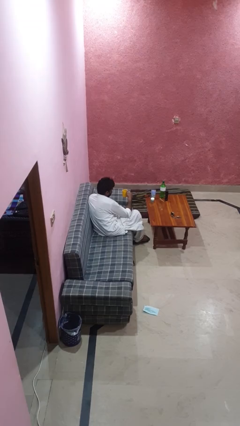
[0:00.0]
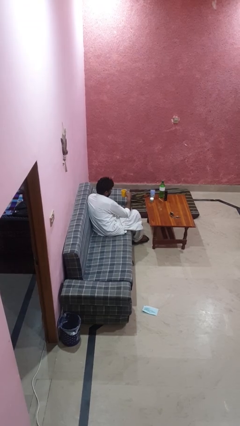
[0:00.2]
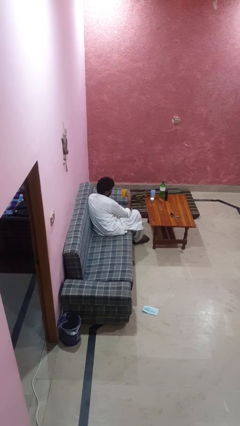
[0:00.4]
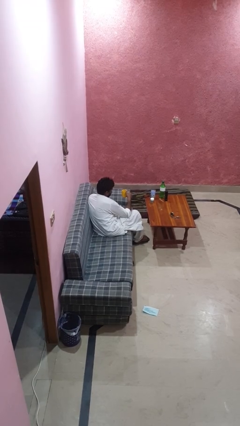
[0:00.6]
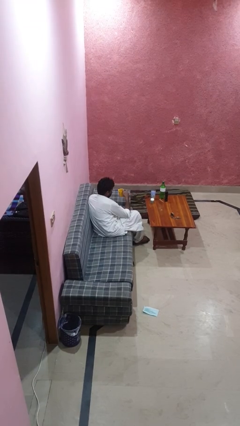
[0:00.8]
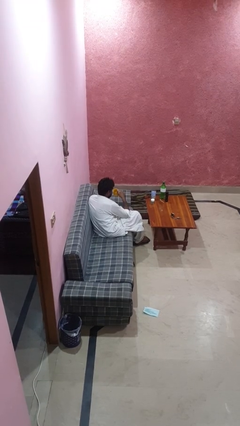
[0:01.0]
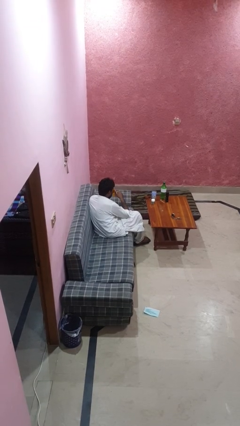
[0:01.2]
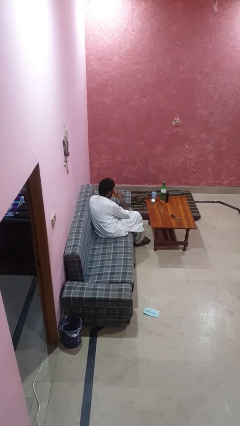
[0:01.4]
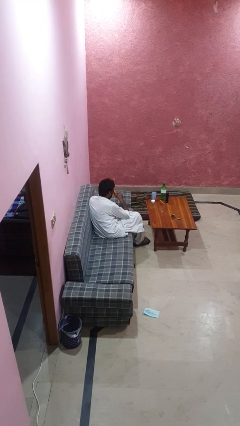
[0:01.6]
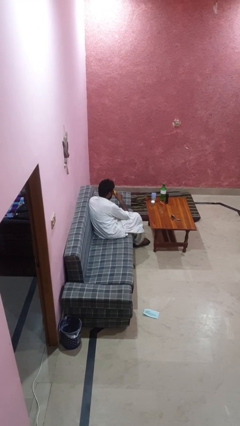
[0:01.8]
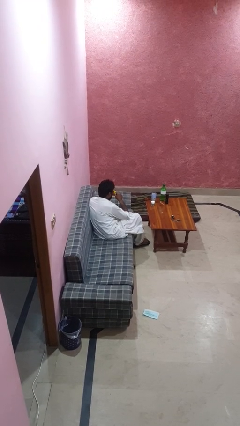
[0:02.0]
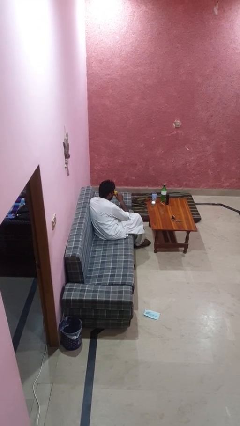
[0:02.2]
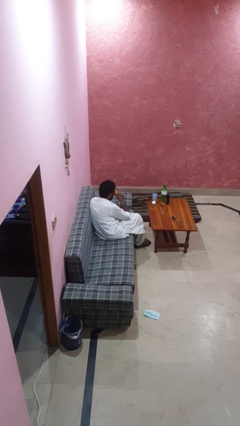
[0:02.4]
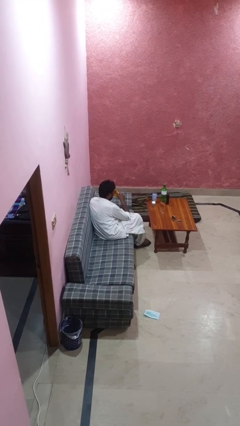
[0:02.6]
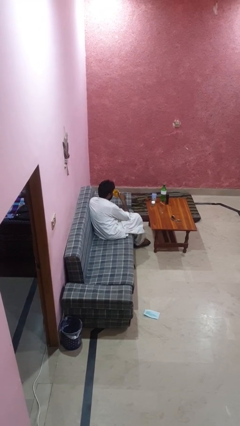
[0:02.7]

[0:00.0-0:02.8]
person drinks from mug

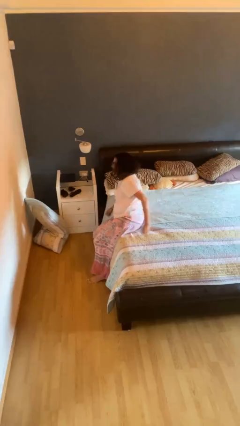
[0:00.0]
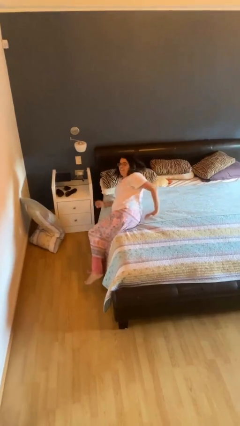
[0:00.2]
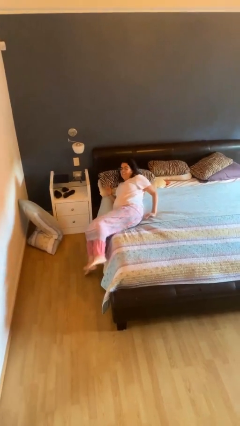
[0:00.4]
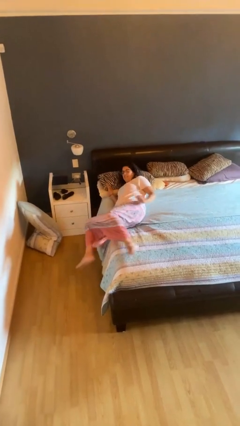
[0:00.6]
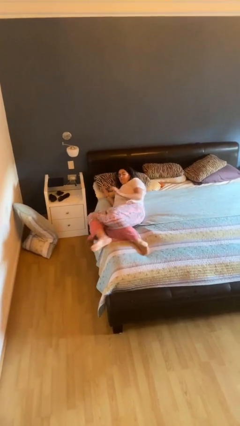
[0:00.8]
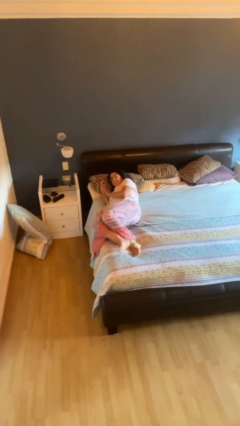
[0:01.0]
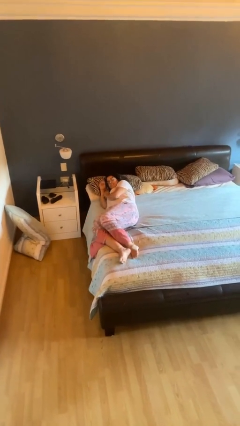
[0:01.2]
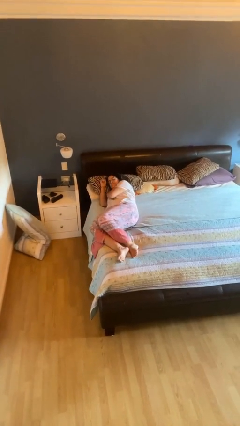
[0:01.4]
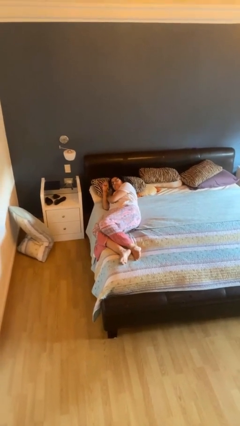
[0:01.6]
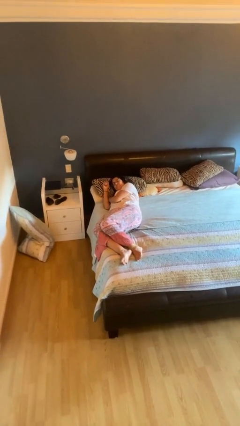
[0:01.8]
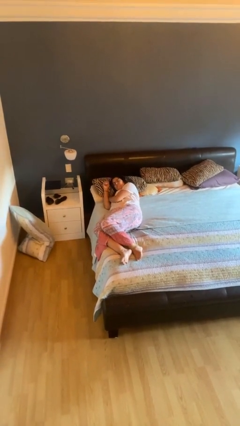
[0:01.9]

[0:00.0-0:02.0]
person lies down on bed

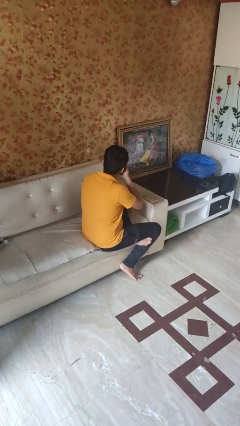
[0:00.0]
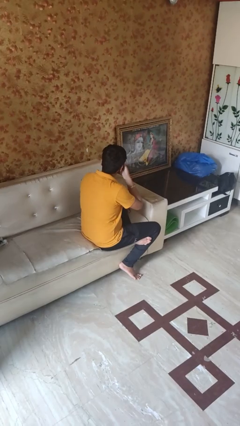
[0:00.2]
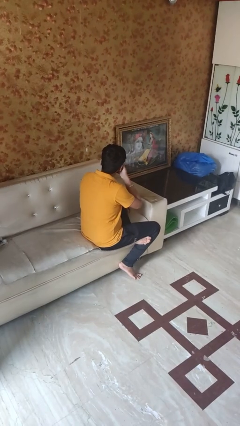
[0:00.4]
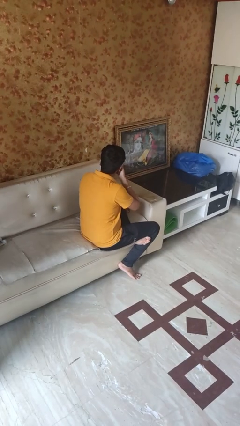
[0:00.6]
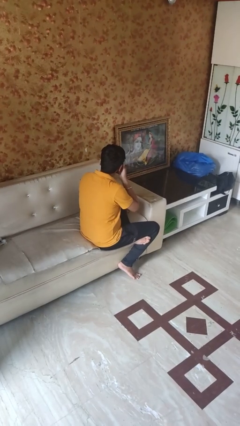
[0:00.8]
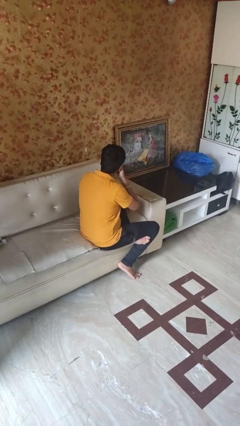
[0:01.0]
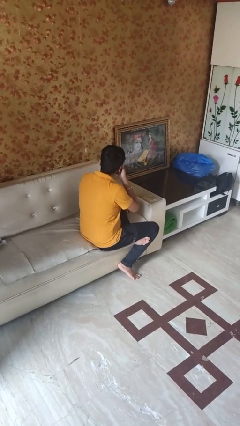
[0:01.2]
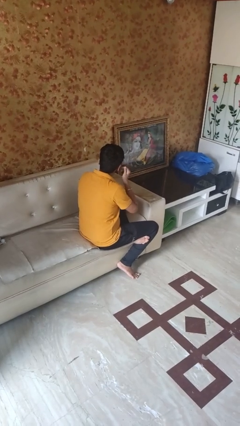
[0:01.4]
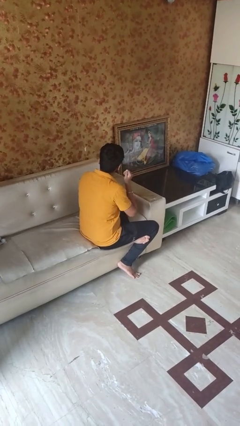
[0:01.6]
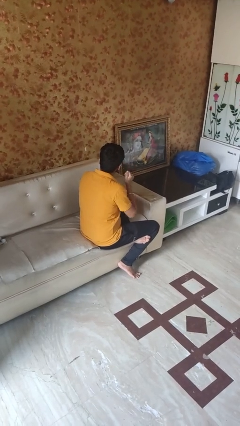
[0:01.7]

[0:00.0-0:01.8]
person rubs eyes

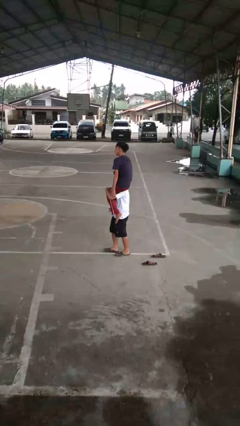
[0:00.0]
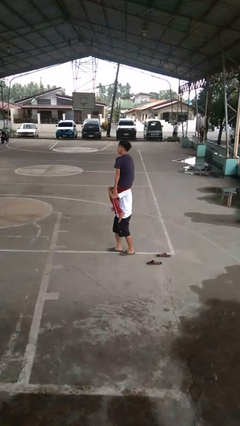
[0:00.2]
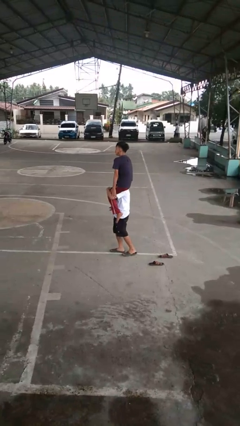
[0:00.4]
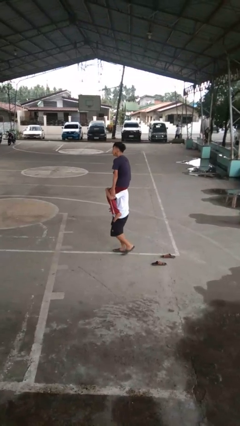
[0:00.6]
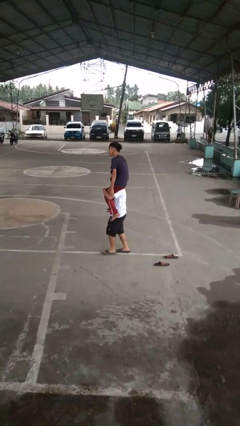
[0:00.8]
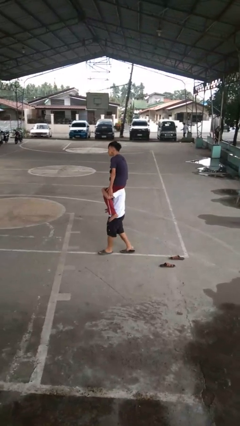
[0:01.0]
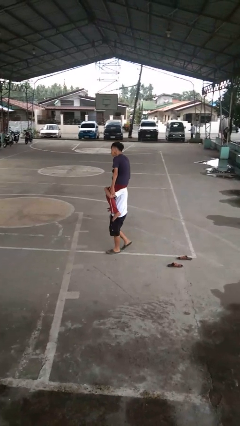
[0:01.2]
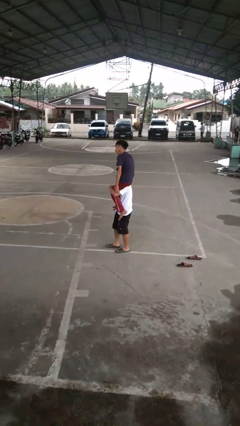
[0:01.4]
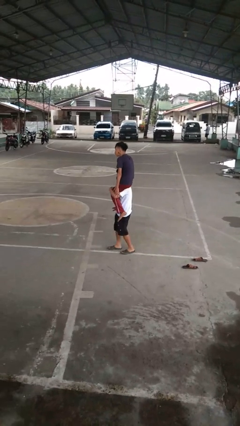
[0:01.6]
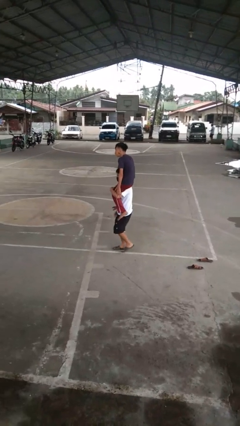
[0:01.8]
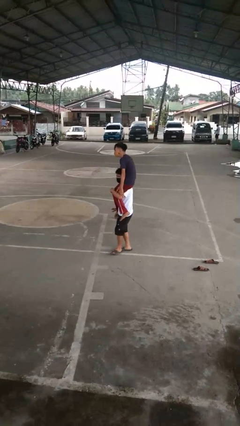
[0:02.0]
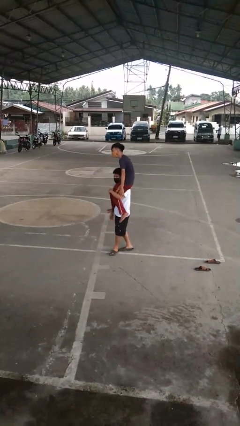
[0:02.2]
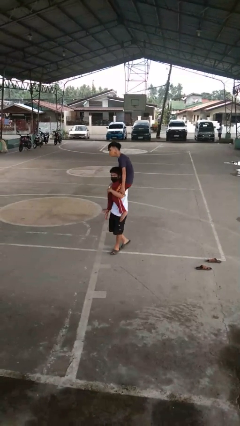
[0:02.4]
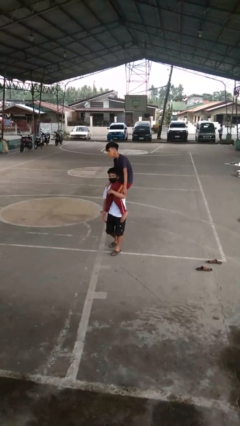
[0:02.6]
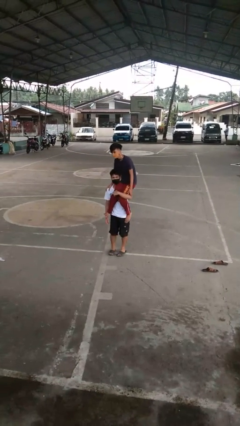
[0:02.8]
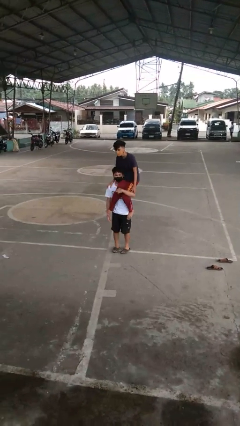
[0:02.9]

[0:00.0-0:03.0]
person carries person on shoulders

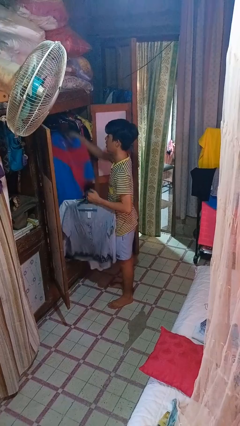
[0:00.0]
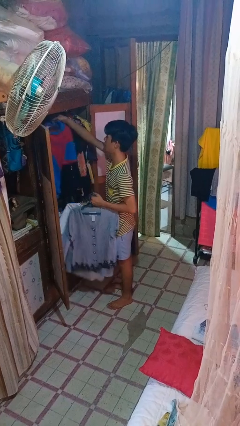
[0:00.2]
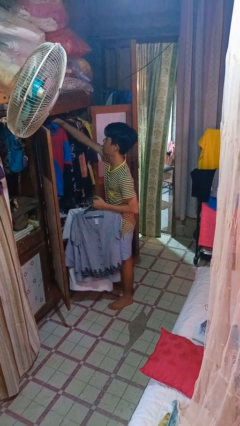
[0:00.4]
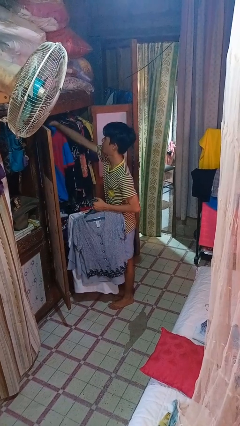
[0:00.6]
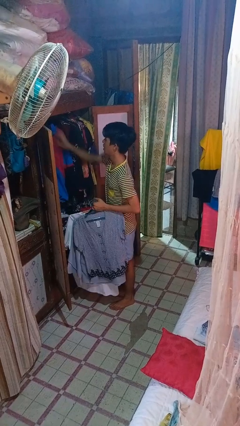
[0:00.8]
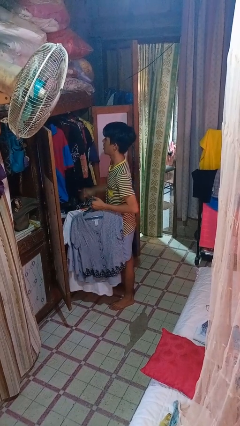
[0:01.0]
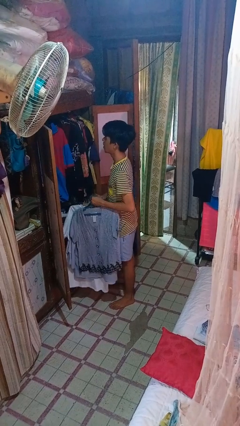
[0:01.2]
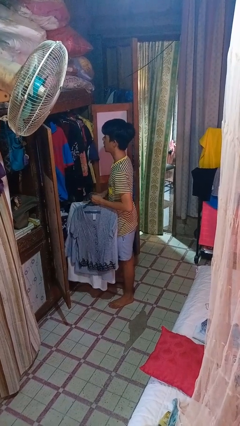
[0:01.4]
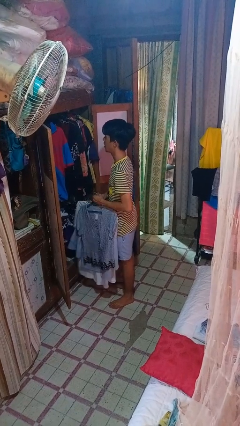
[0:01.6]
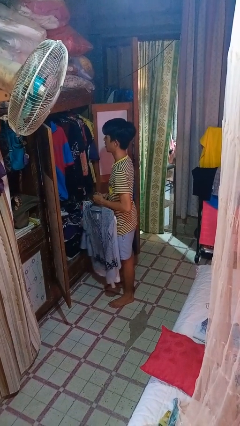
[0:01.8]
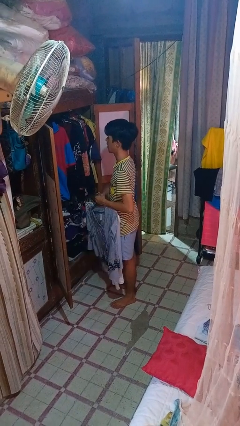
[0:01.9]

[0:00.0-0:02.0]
person puts clothes into closet

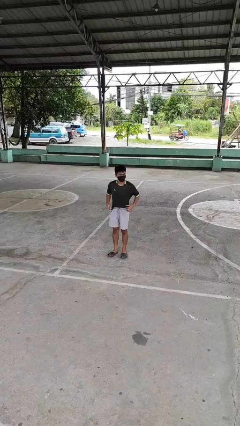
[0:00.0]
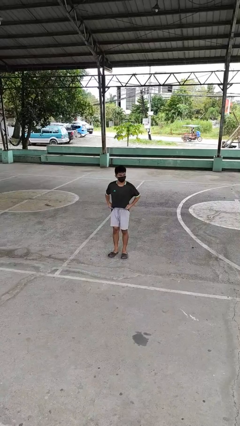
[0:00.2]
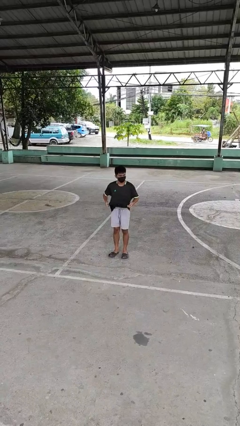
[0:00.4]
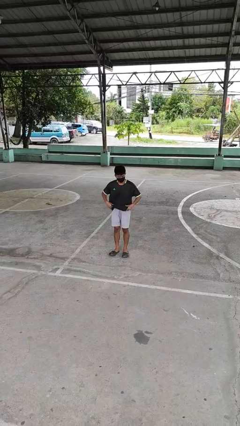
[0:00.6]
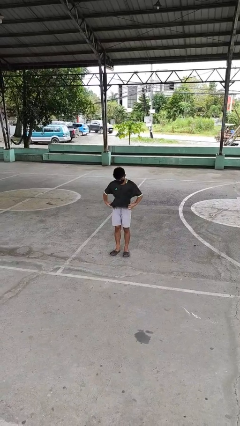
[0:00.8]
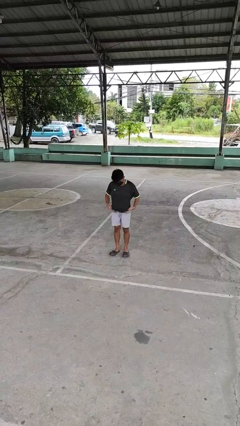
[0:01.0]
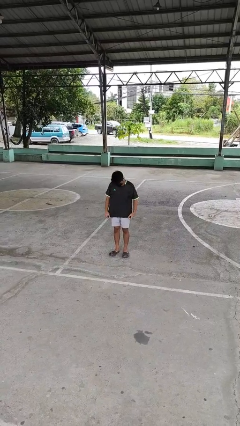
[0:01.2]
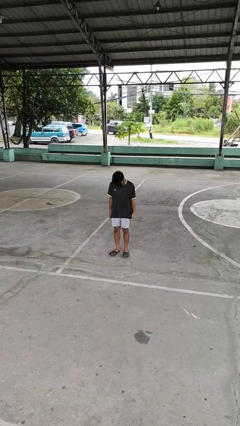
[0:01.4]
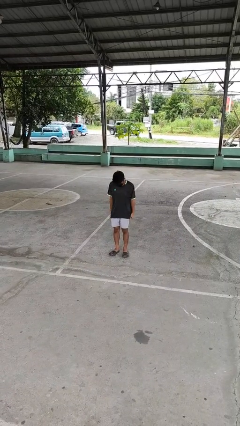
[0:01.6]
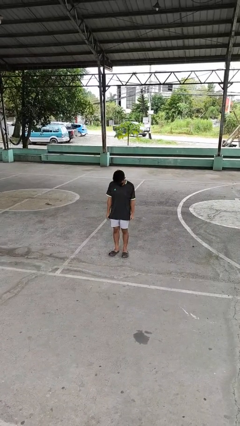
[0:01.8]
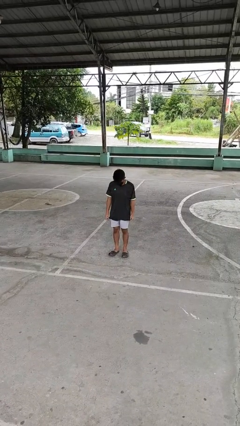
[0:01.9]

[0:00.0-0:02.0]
person untucks shirt

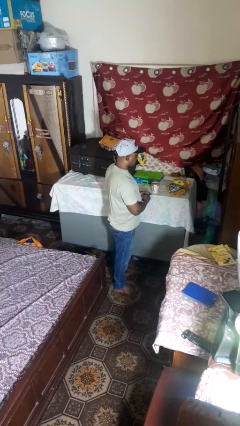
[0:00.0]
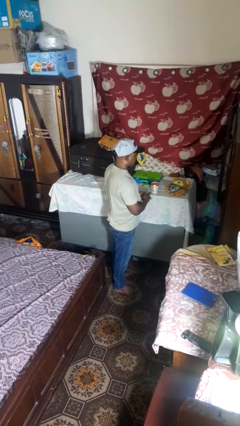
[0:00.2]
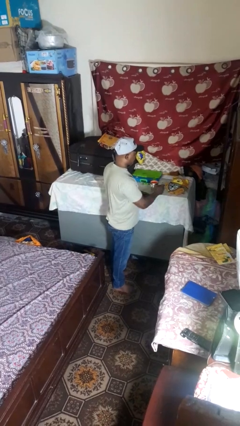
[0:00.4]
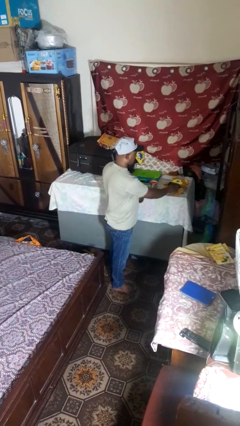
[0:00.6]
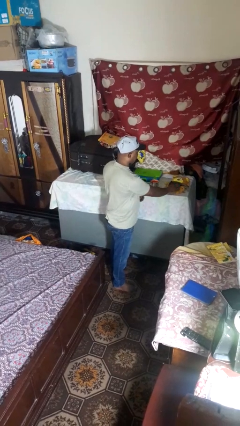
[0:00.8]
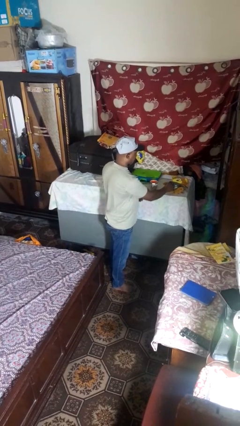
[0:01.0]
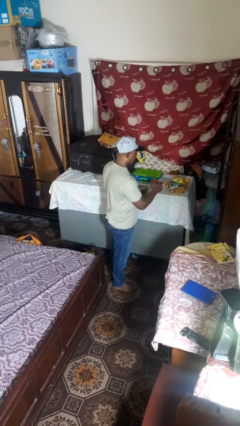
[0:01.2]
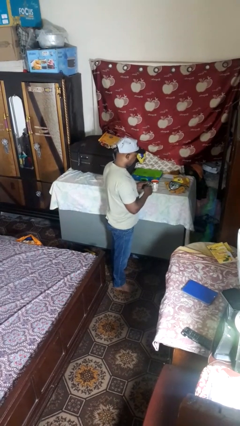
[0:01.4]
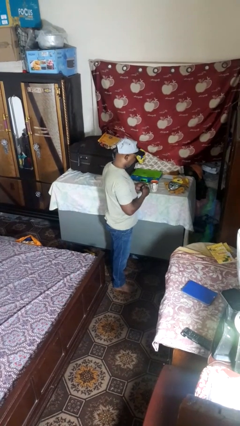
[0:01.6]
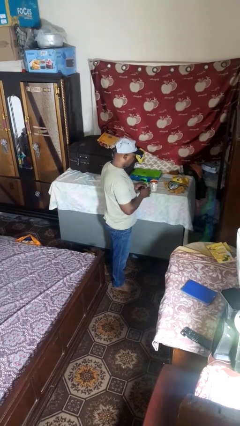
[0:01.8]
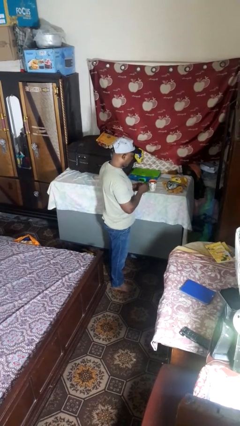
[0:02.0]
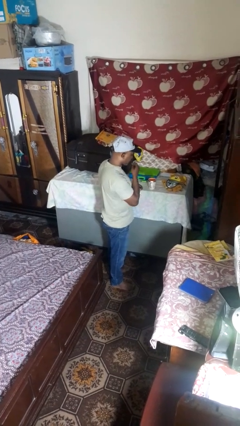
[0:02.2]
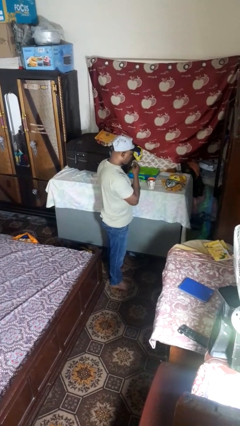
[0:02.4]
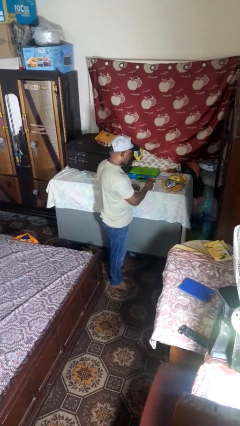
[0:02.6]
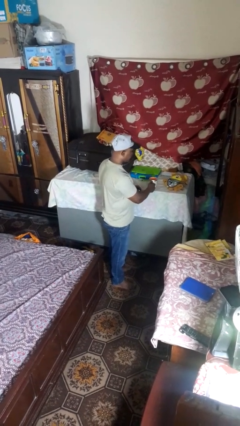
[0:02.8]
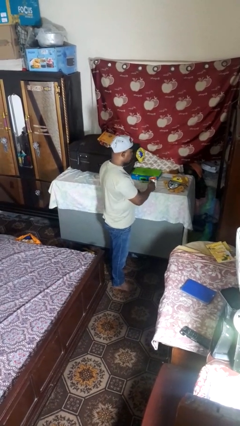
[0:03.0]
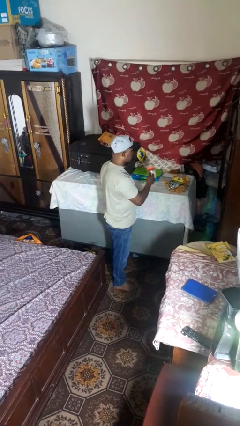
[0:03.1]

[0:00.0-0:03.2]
person takes medicine pills

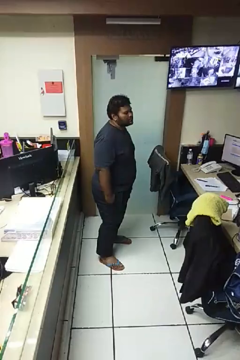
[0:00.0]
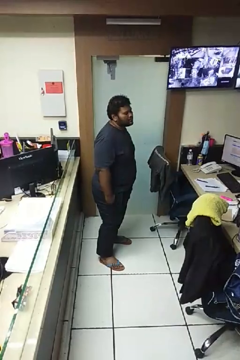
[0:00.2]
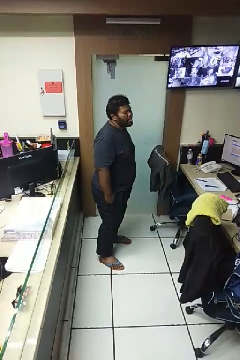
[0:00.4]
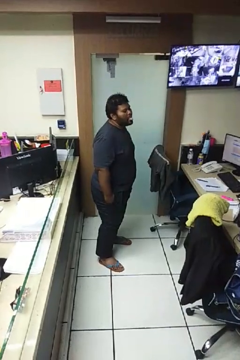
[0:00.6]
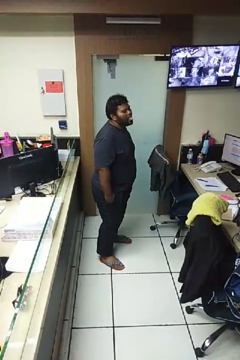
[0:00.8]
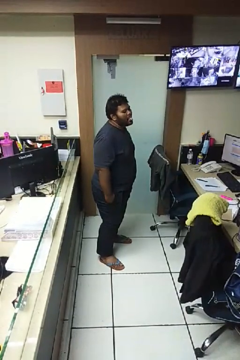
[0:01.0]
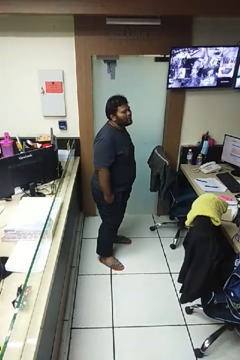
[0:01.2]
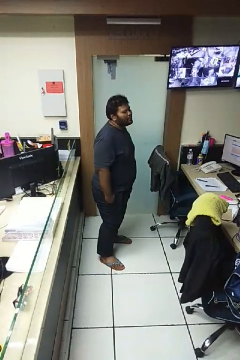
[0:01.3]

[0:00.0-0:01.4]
person sticks out tongue
